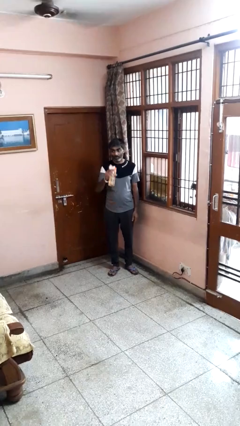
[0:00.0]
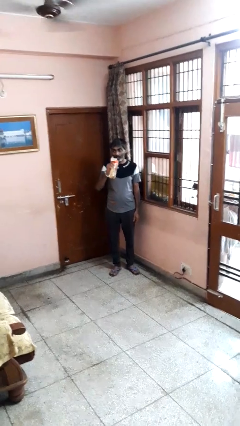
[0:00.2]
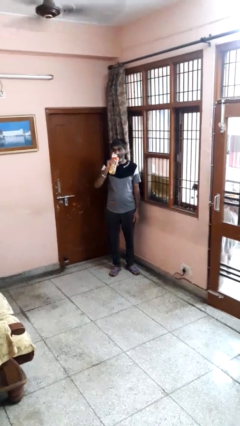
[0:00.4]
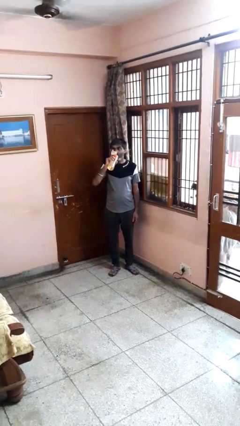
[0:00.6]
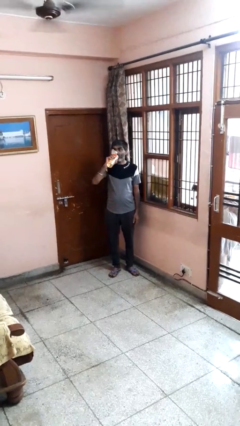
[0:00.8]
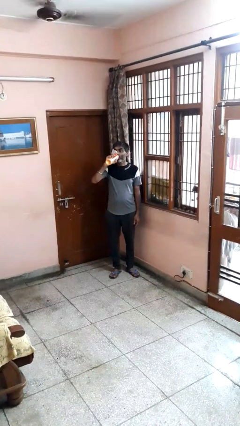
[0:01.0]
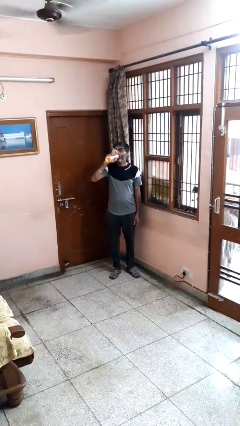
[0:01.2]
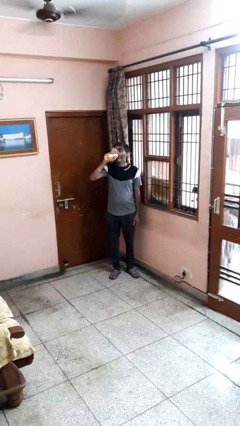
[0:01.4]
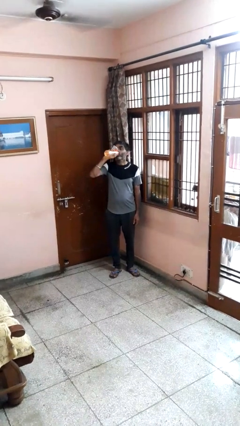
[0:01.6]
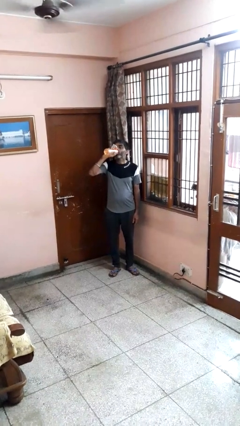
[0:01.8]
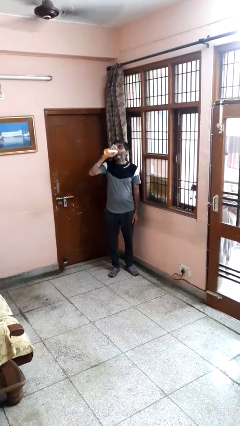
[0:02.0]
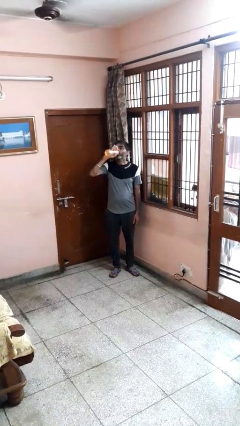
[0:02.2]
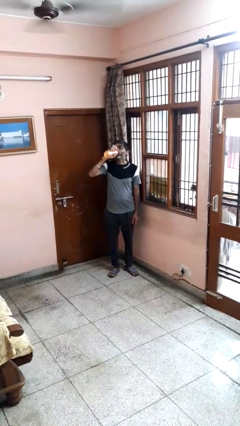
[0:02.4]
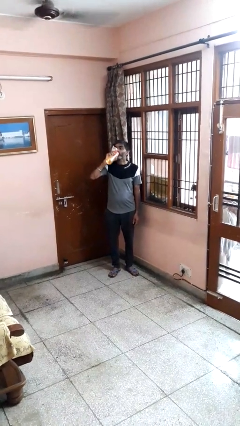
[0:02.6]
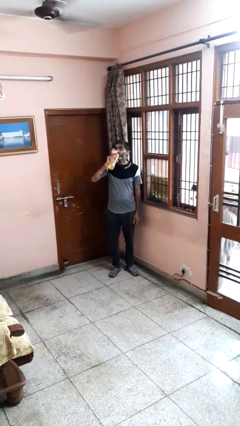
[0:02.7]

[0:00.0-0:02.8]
person drinks from bottle

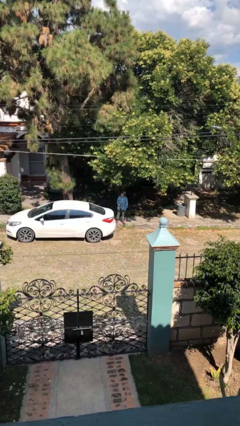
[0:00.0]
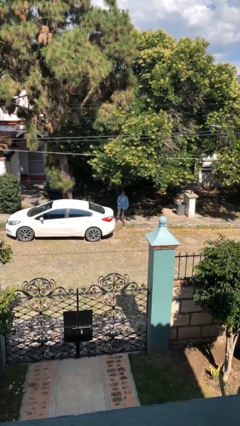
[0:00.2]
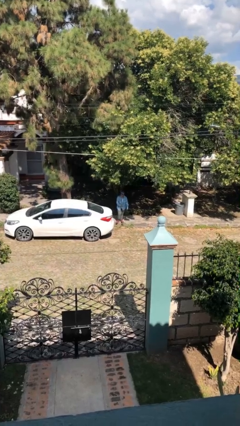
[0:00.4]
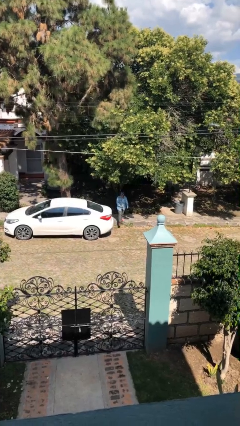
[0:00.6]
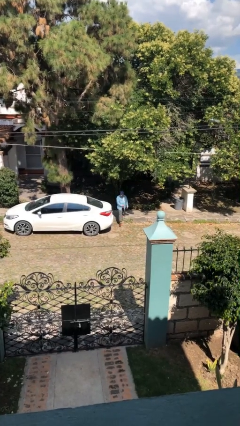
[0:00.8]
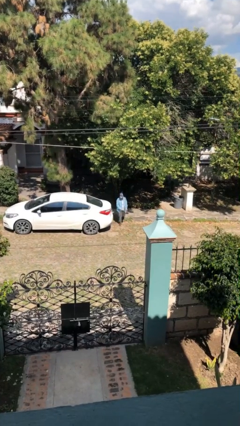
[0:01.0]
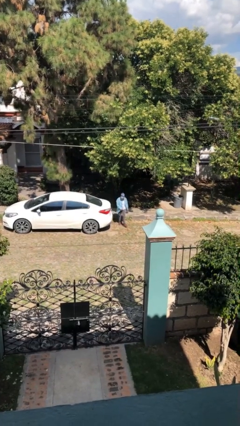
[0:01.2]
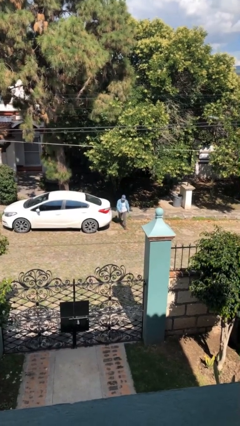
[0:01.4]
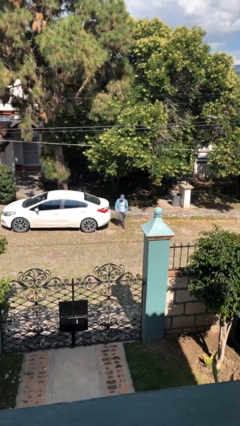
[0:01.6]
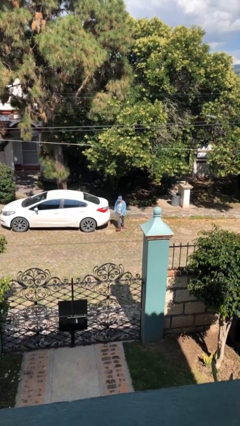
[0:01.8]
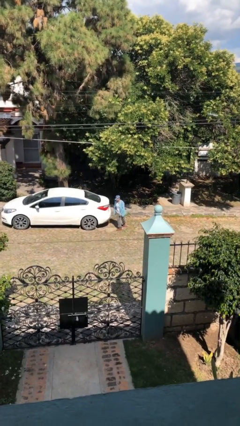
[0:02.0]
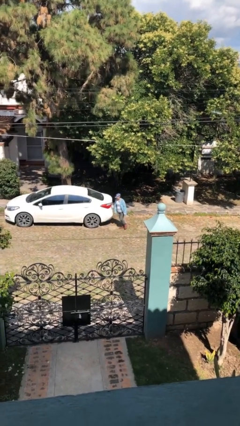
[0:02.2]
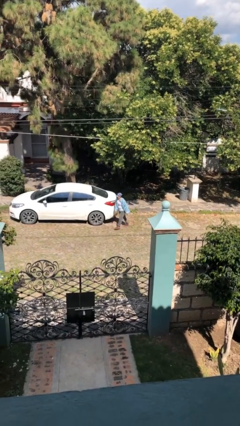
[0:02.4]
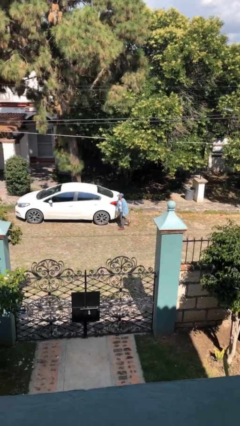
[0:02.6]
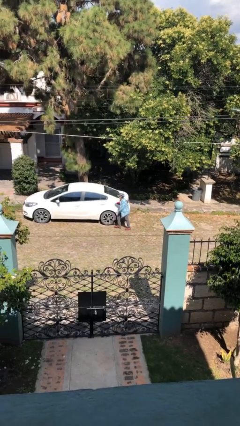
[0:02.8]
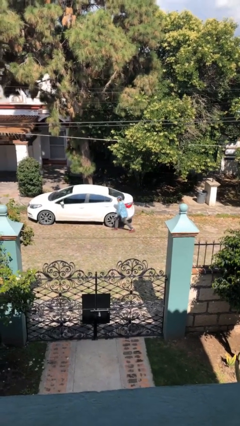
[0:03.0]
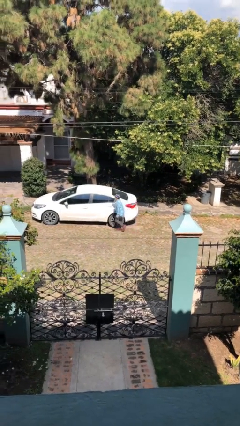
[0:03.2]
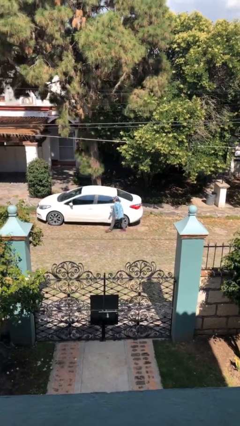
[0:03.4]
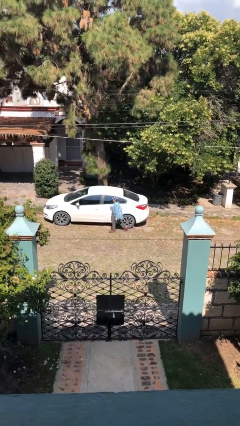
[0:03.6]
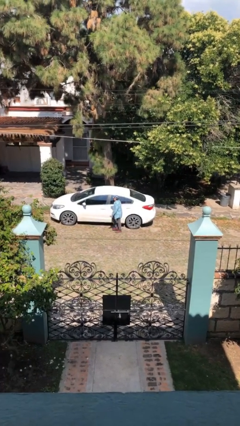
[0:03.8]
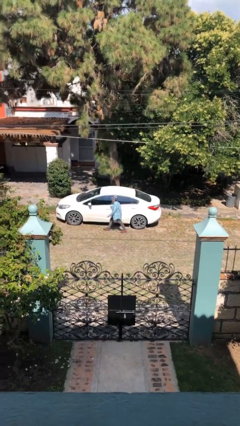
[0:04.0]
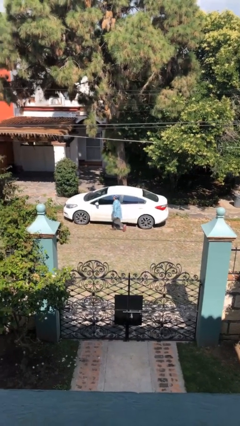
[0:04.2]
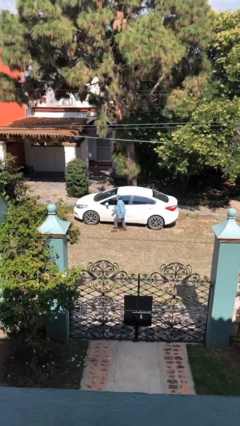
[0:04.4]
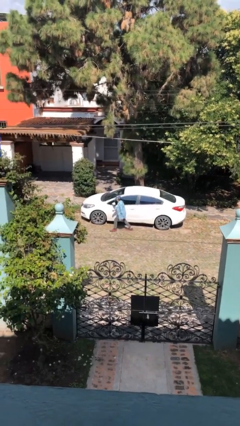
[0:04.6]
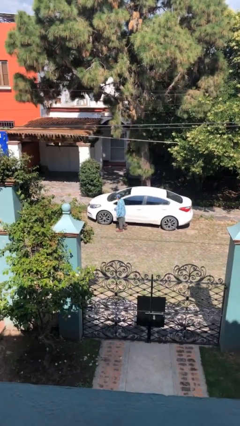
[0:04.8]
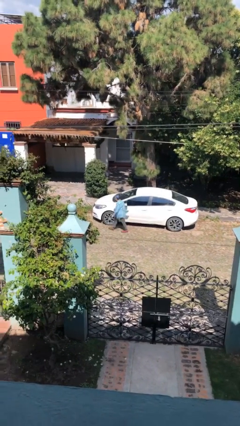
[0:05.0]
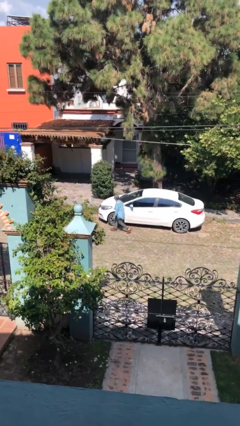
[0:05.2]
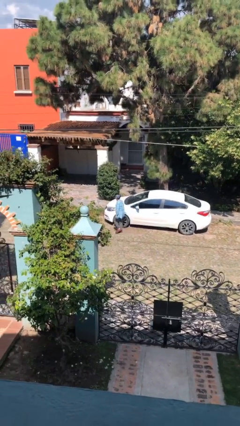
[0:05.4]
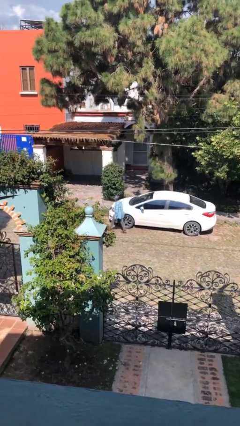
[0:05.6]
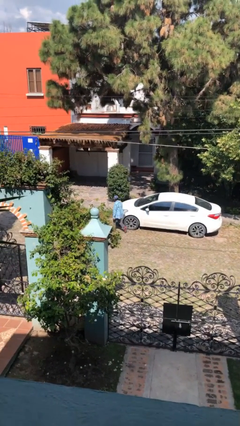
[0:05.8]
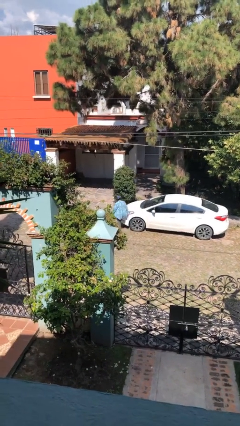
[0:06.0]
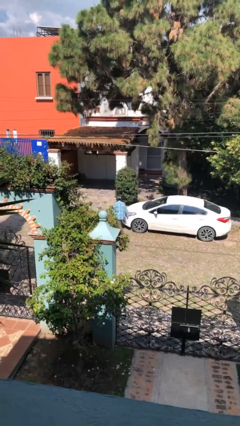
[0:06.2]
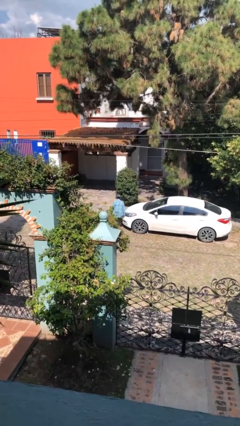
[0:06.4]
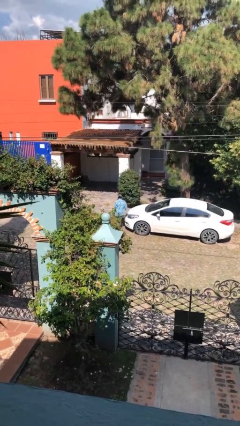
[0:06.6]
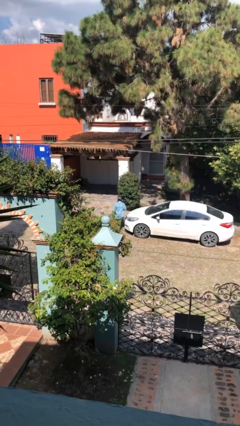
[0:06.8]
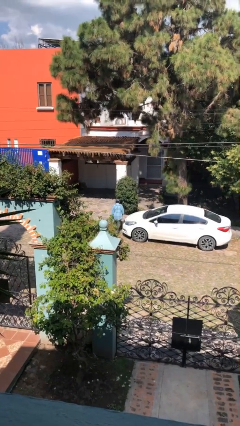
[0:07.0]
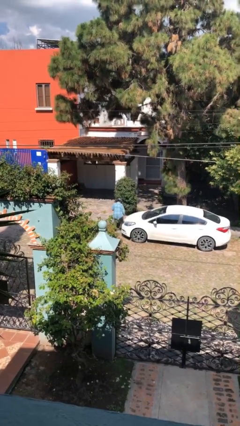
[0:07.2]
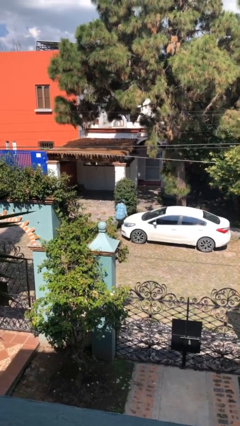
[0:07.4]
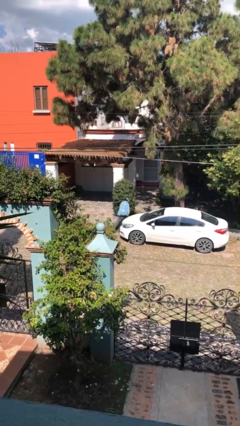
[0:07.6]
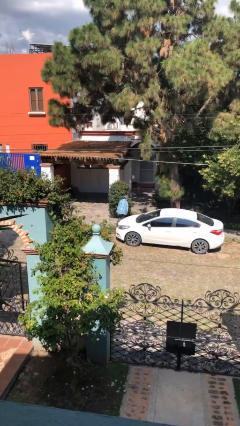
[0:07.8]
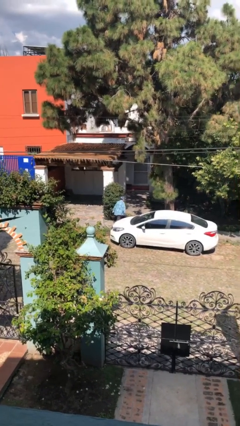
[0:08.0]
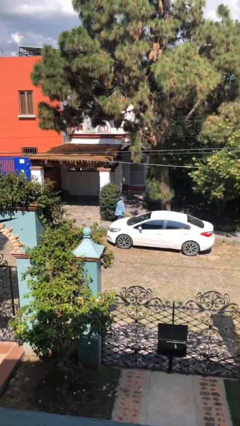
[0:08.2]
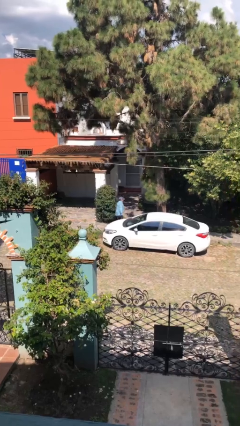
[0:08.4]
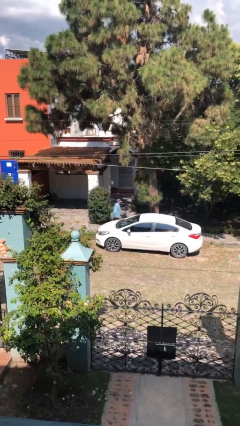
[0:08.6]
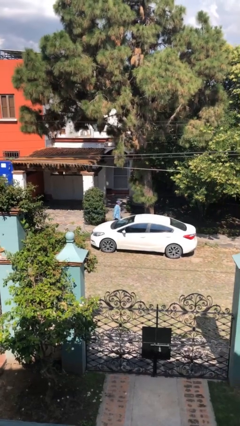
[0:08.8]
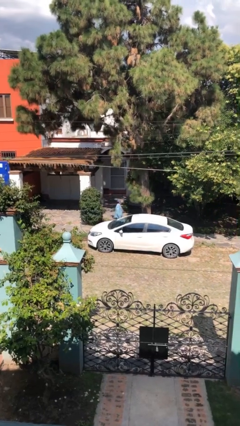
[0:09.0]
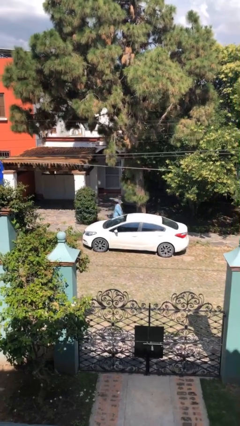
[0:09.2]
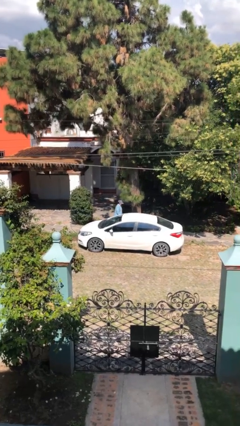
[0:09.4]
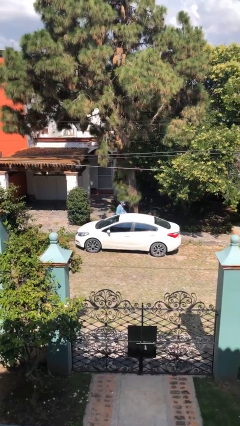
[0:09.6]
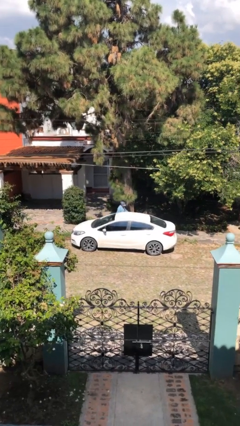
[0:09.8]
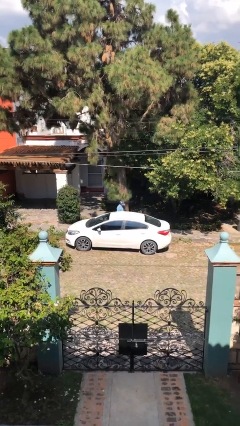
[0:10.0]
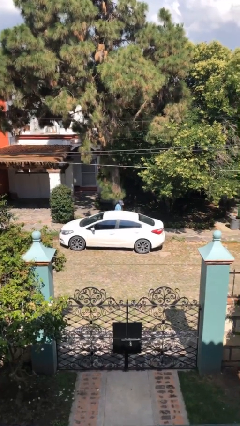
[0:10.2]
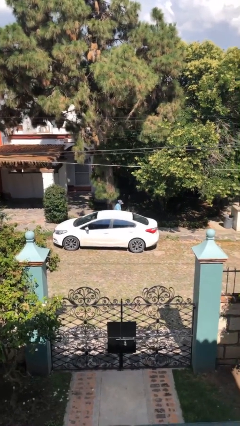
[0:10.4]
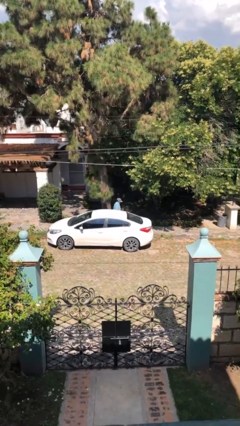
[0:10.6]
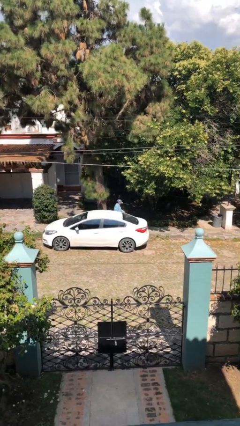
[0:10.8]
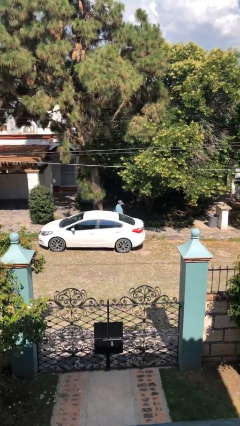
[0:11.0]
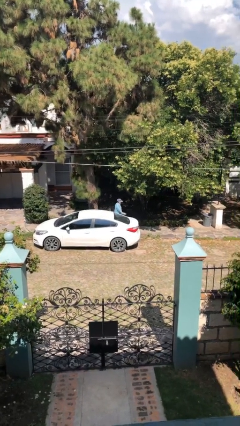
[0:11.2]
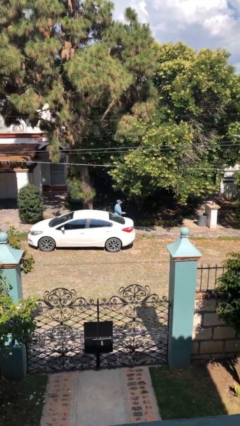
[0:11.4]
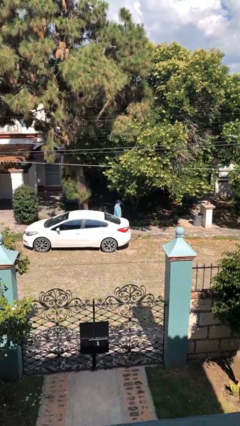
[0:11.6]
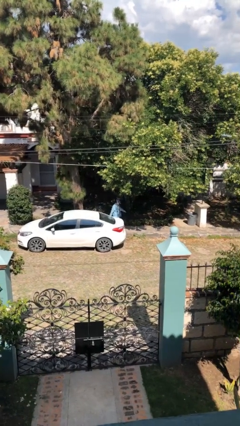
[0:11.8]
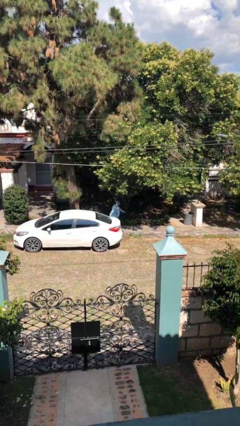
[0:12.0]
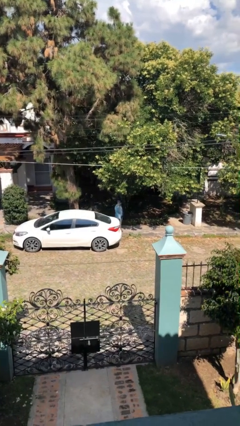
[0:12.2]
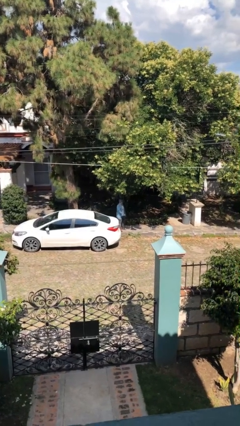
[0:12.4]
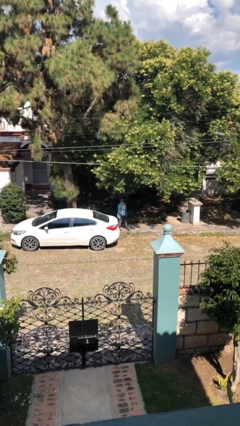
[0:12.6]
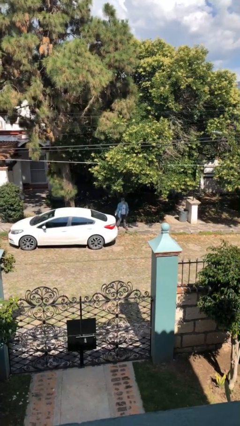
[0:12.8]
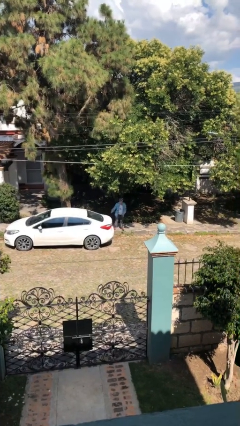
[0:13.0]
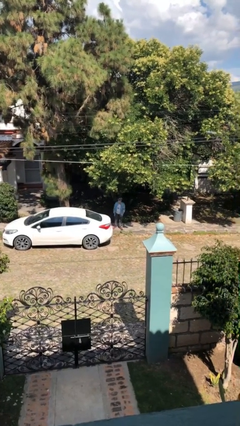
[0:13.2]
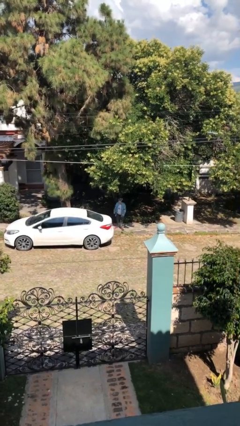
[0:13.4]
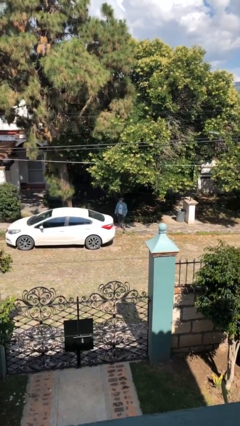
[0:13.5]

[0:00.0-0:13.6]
person walks around car

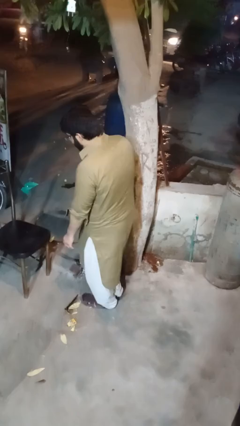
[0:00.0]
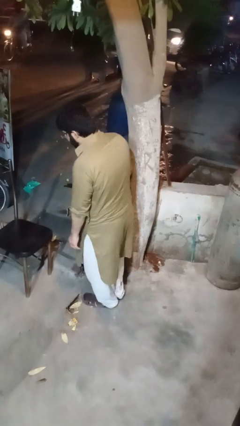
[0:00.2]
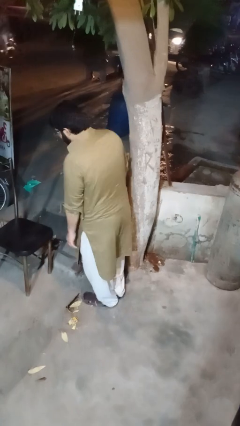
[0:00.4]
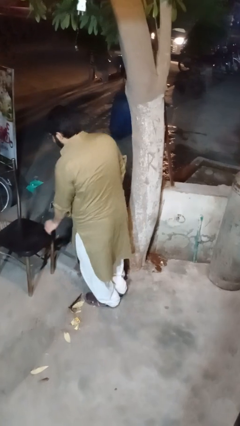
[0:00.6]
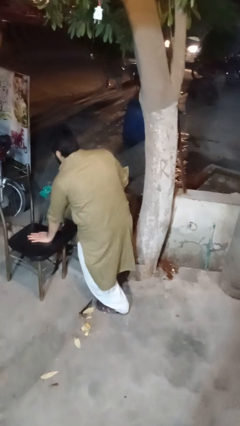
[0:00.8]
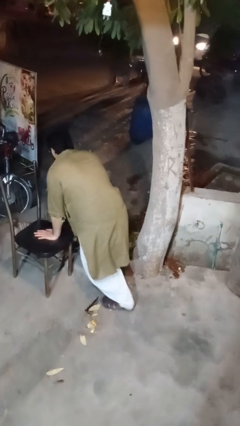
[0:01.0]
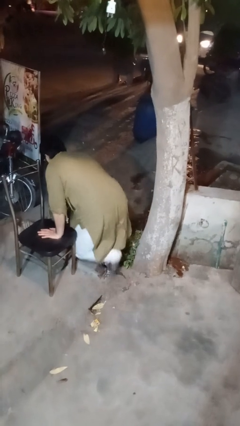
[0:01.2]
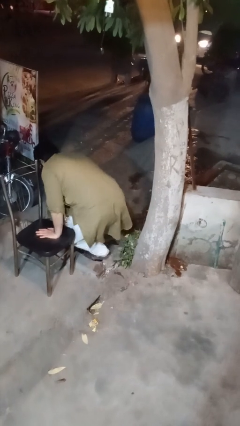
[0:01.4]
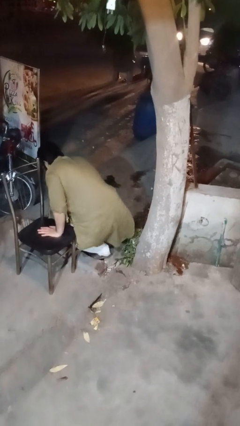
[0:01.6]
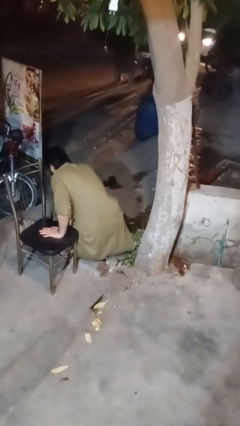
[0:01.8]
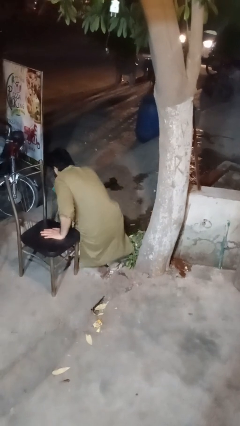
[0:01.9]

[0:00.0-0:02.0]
person lies down on floor
